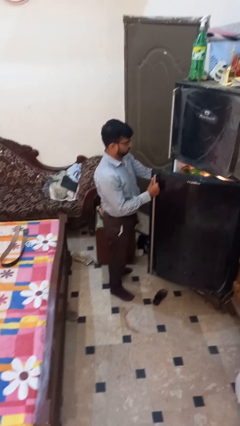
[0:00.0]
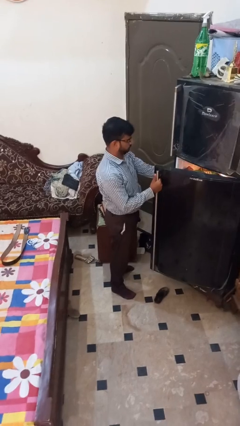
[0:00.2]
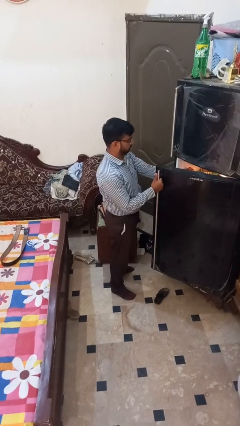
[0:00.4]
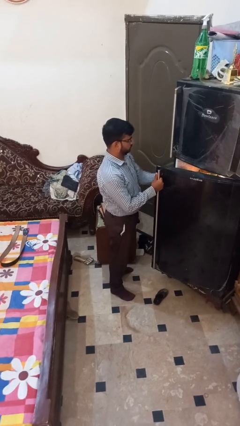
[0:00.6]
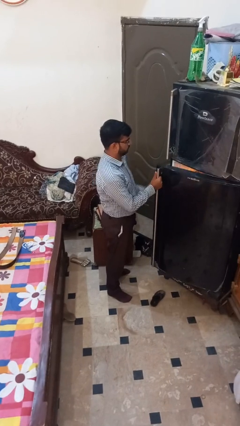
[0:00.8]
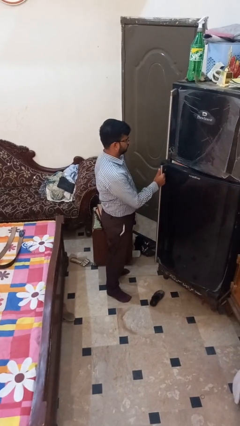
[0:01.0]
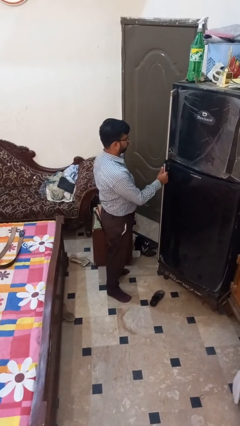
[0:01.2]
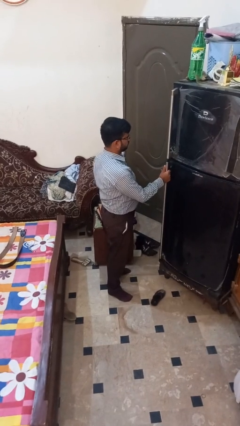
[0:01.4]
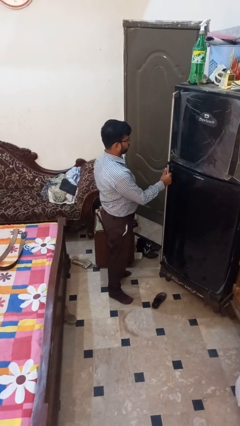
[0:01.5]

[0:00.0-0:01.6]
person puts object into refrigerator

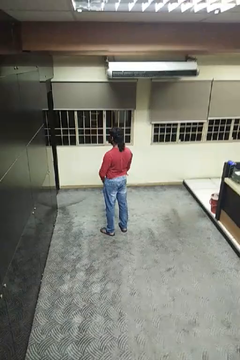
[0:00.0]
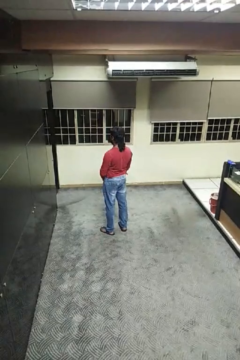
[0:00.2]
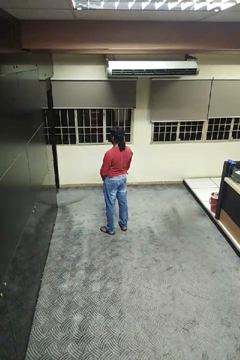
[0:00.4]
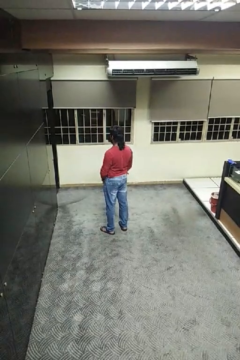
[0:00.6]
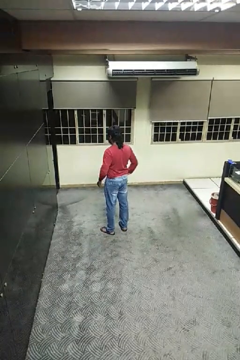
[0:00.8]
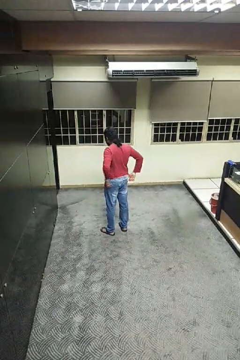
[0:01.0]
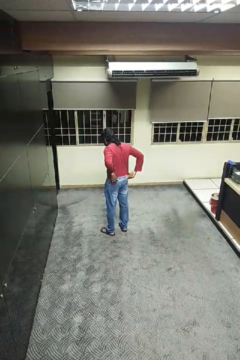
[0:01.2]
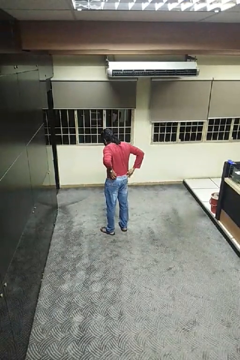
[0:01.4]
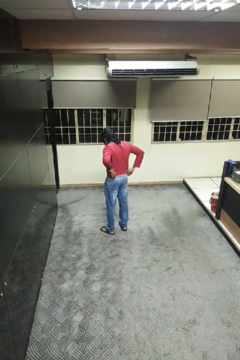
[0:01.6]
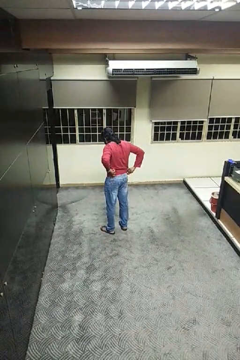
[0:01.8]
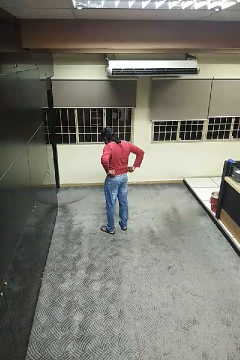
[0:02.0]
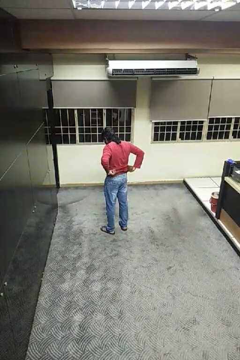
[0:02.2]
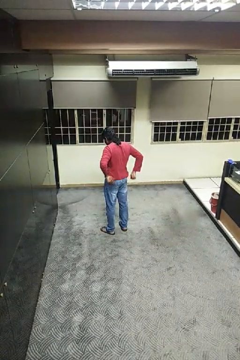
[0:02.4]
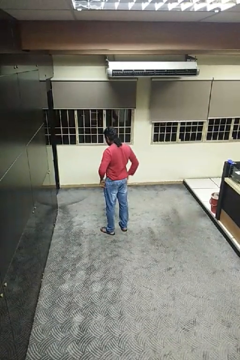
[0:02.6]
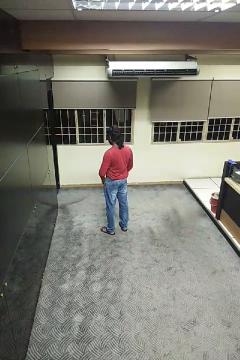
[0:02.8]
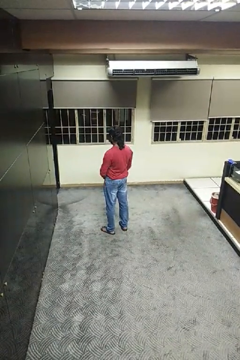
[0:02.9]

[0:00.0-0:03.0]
person untucks shirt

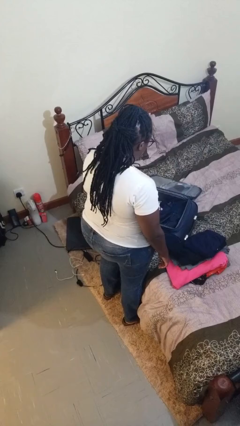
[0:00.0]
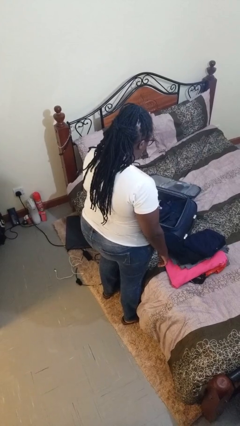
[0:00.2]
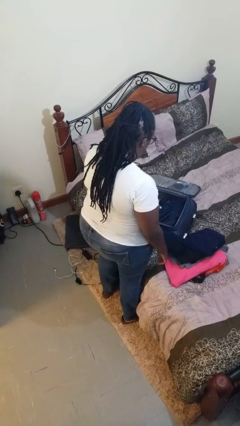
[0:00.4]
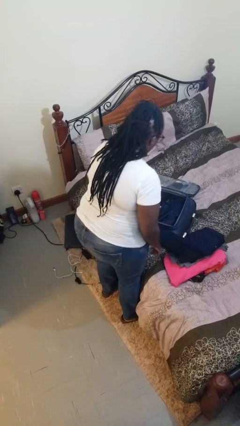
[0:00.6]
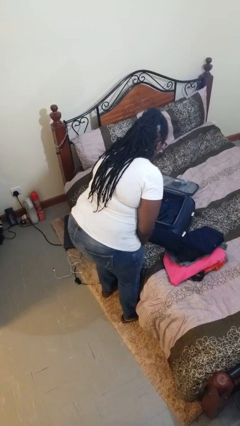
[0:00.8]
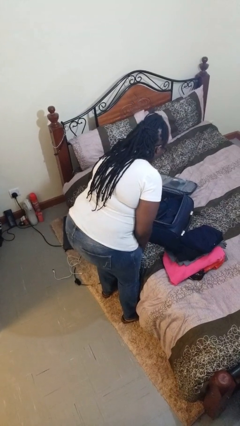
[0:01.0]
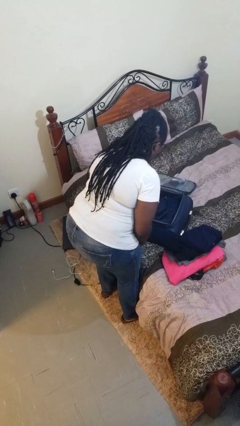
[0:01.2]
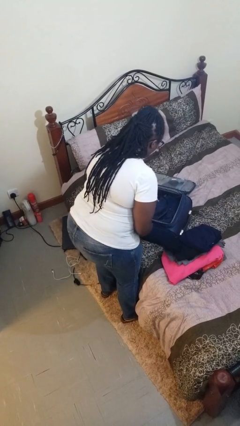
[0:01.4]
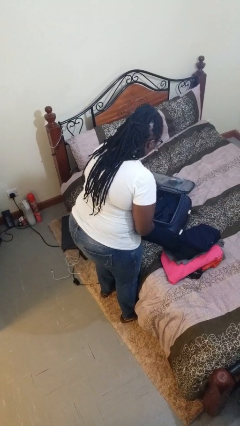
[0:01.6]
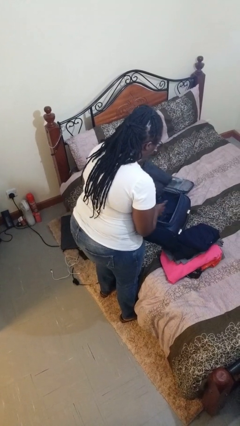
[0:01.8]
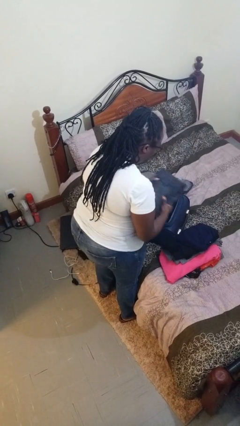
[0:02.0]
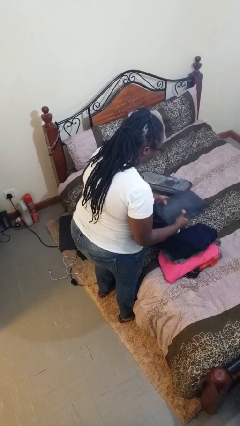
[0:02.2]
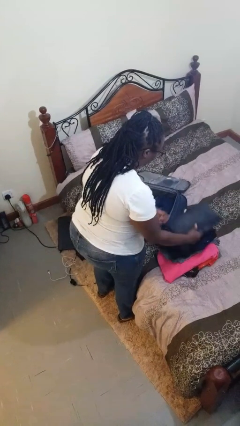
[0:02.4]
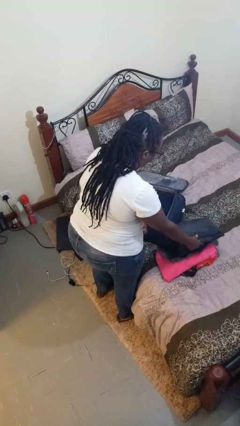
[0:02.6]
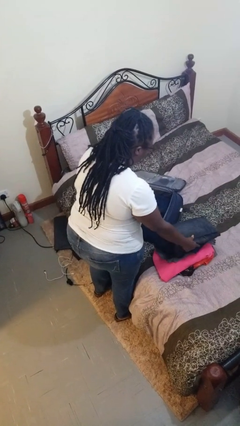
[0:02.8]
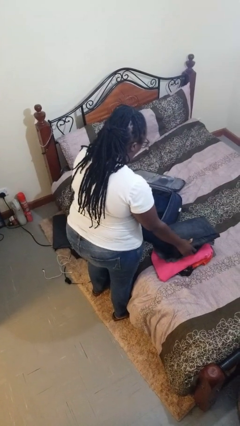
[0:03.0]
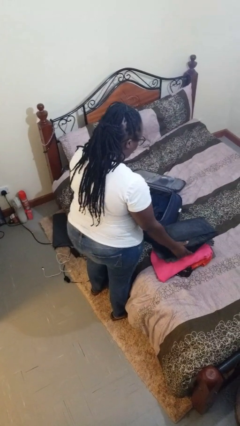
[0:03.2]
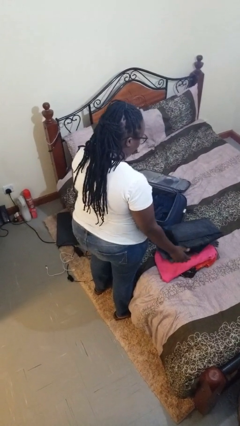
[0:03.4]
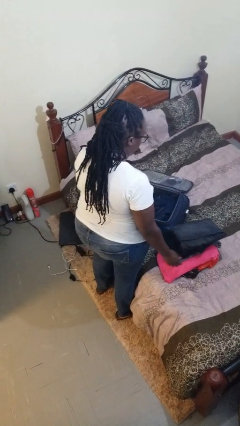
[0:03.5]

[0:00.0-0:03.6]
person unloads clothes from suitcase

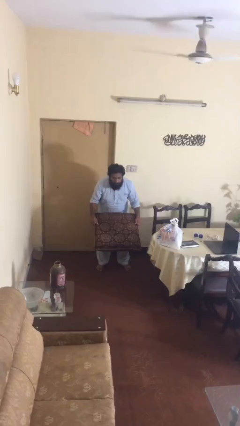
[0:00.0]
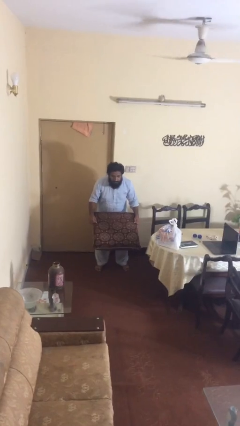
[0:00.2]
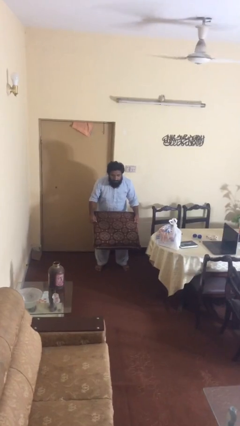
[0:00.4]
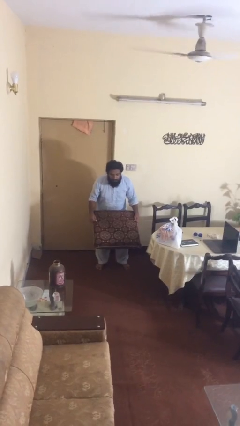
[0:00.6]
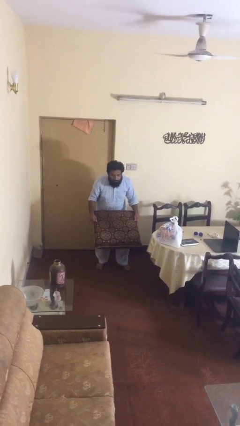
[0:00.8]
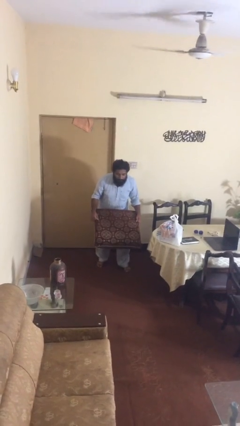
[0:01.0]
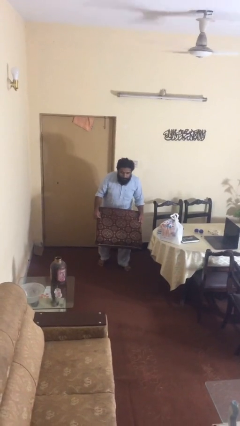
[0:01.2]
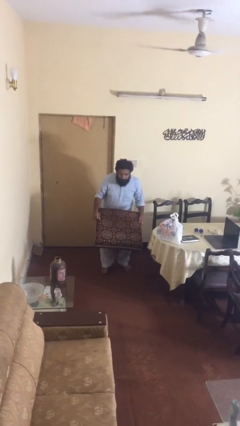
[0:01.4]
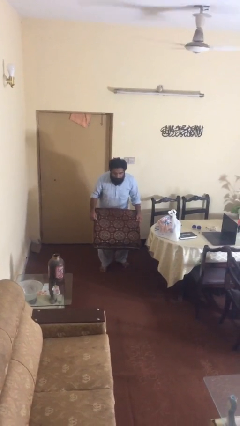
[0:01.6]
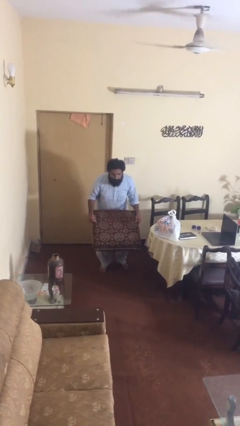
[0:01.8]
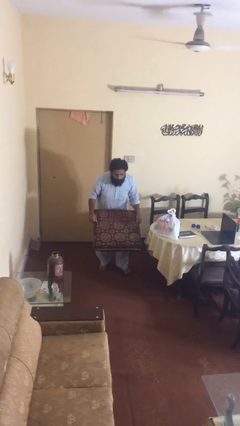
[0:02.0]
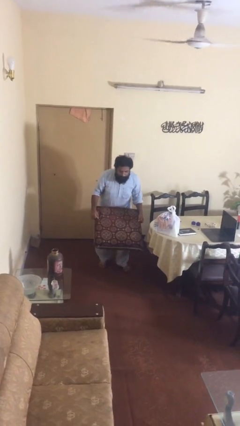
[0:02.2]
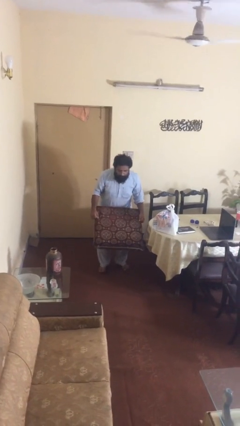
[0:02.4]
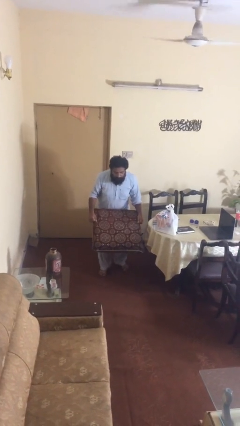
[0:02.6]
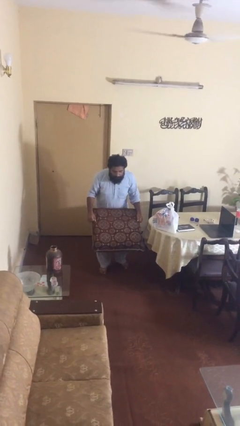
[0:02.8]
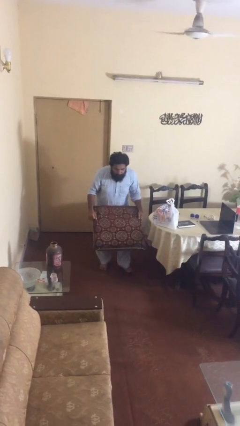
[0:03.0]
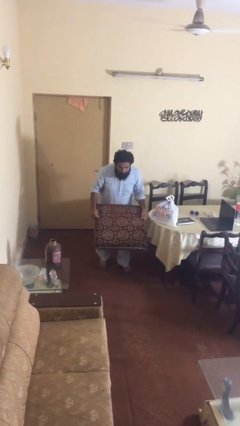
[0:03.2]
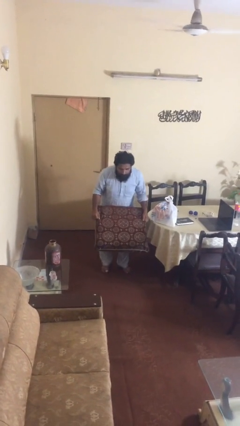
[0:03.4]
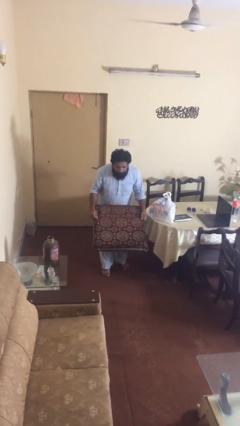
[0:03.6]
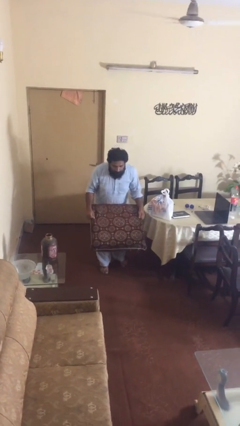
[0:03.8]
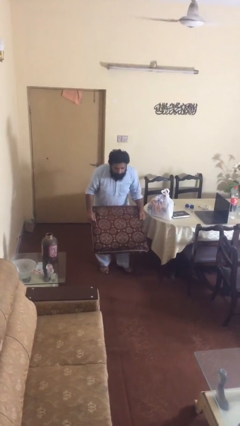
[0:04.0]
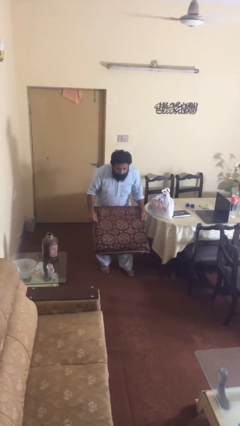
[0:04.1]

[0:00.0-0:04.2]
person carries heavy object

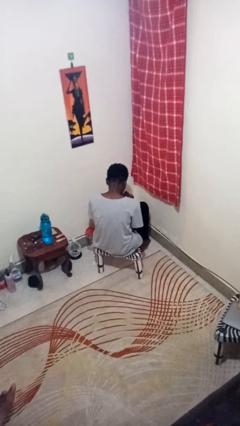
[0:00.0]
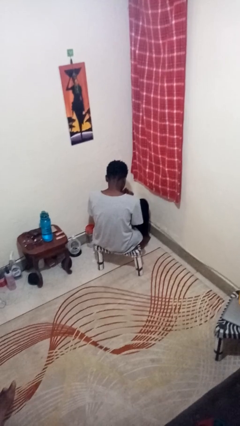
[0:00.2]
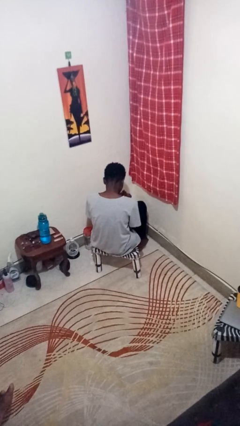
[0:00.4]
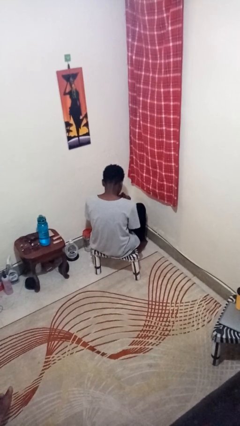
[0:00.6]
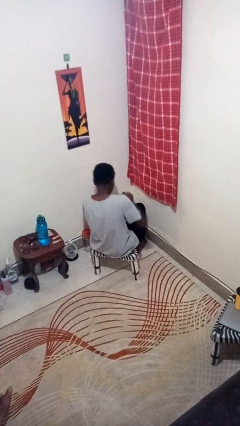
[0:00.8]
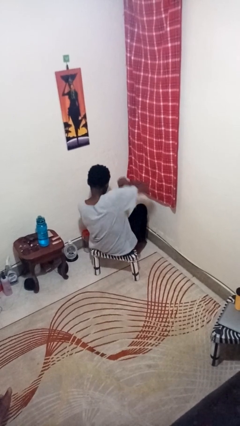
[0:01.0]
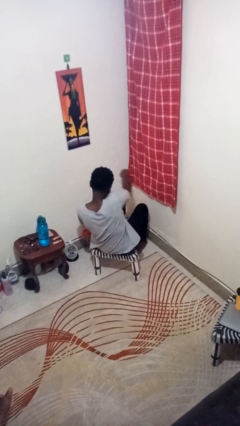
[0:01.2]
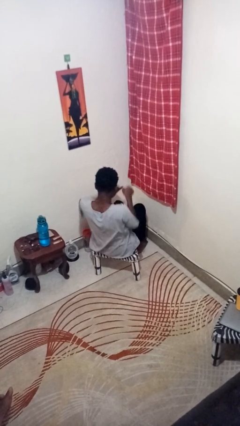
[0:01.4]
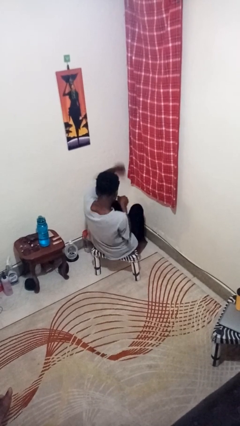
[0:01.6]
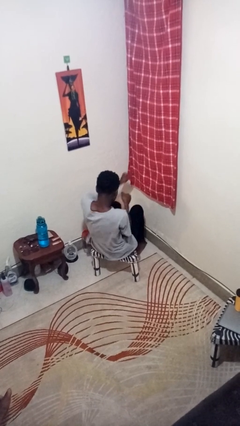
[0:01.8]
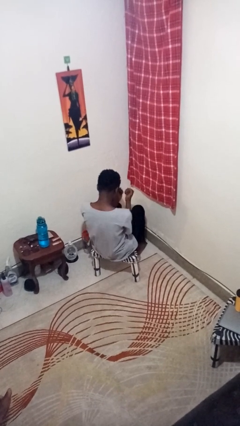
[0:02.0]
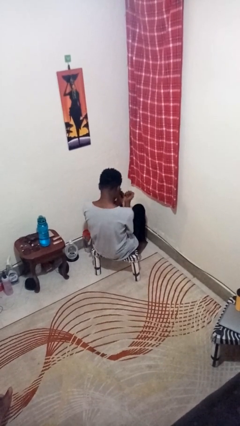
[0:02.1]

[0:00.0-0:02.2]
person punches

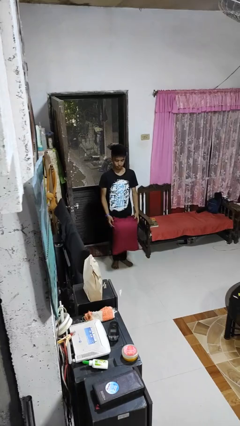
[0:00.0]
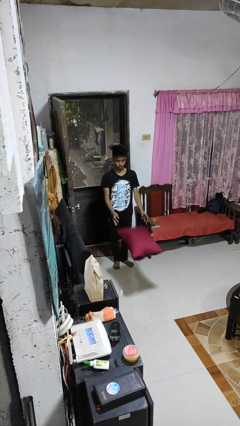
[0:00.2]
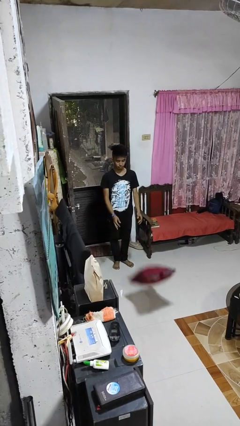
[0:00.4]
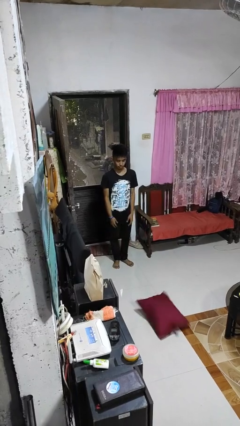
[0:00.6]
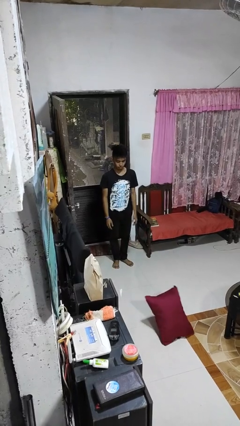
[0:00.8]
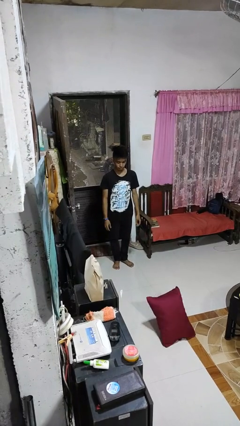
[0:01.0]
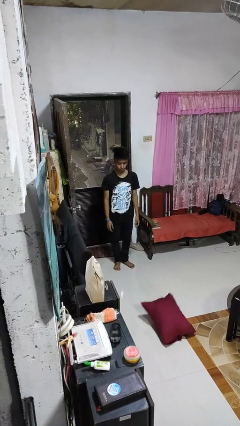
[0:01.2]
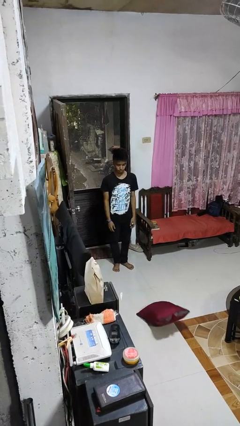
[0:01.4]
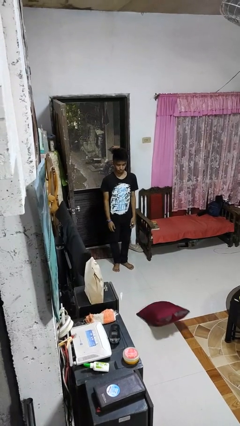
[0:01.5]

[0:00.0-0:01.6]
person throws object to ground

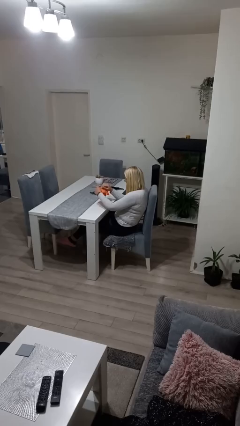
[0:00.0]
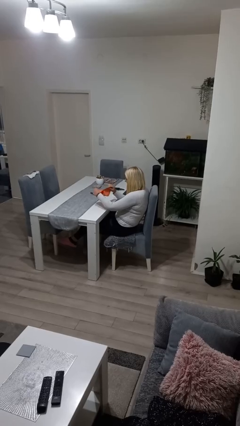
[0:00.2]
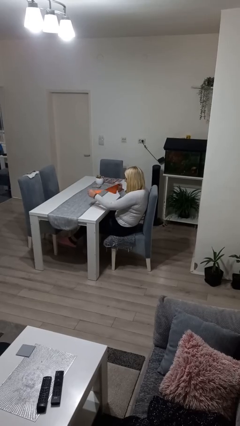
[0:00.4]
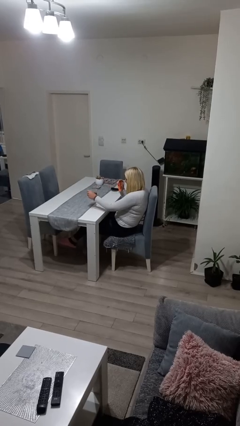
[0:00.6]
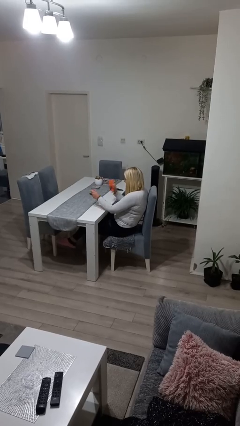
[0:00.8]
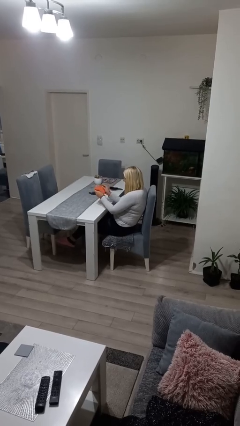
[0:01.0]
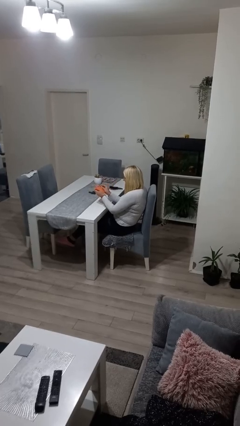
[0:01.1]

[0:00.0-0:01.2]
person tears paper
